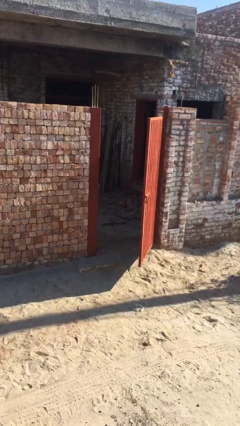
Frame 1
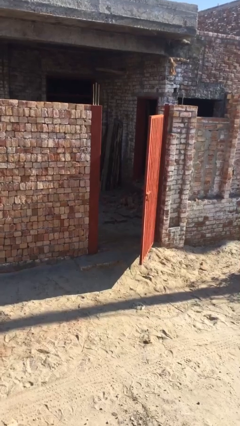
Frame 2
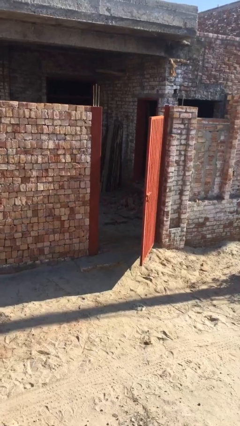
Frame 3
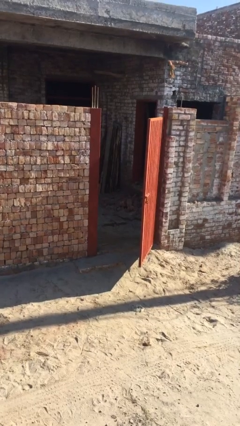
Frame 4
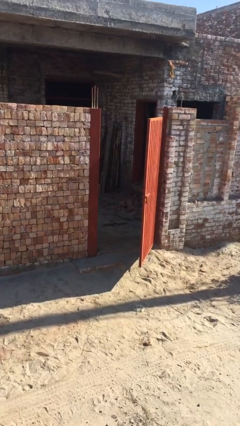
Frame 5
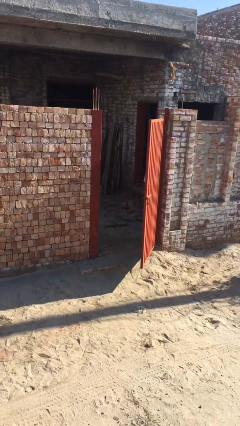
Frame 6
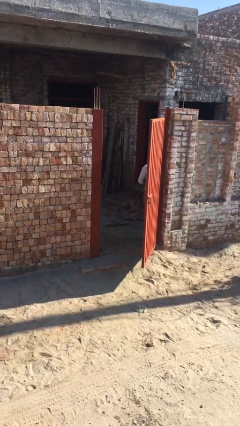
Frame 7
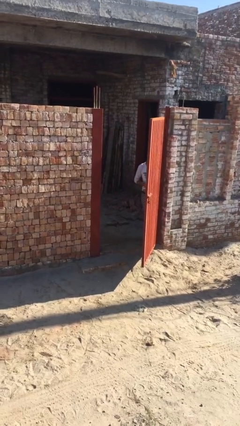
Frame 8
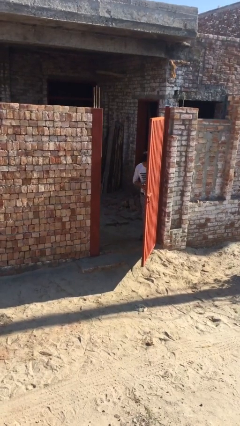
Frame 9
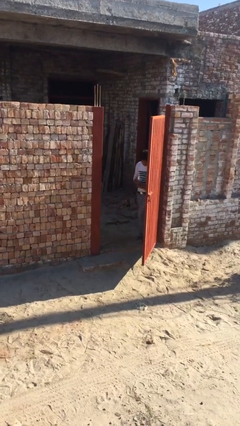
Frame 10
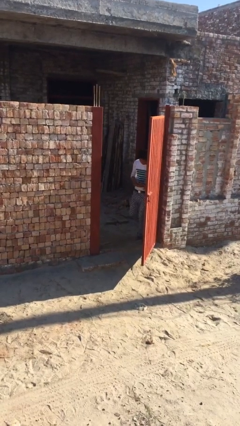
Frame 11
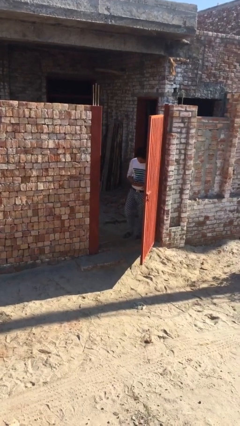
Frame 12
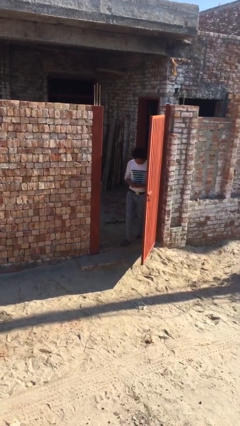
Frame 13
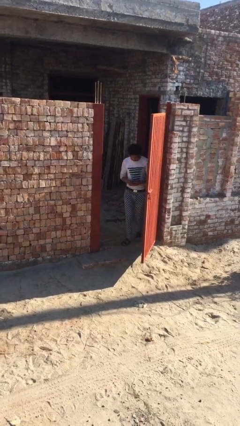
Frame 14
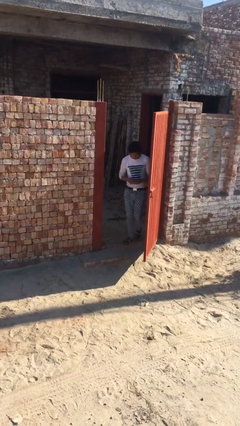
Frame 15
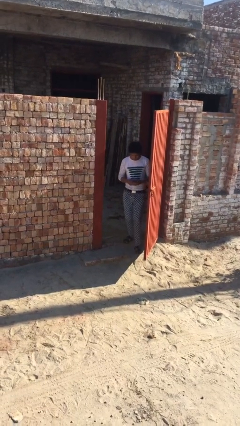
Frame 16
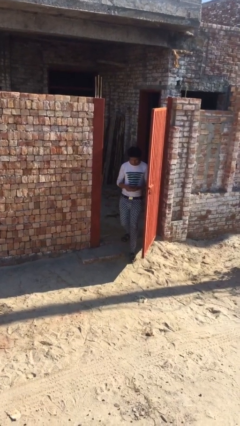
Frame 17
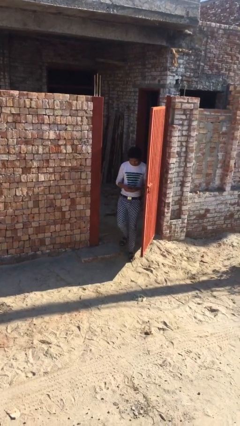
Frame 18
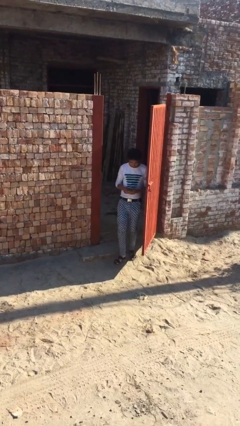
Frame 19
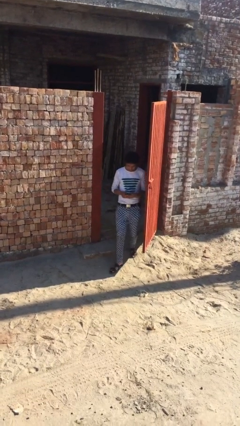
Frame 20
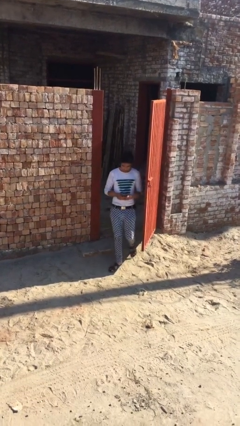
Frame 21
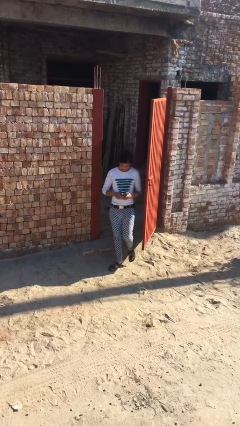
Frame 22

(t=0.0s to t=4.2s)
person enters scene through structure

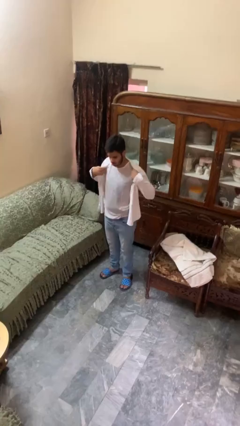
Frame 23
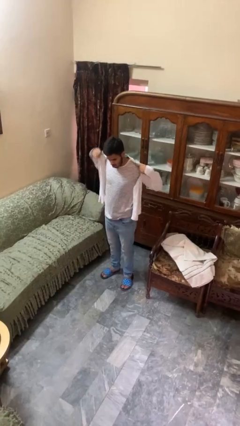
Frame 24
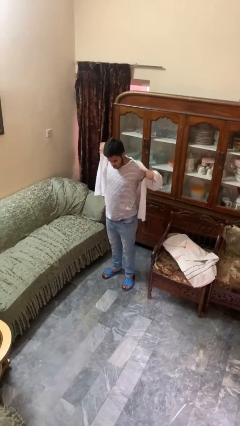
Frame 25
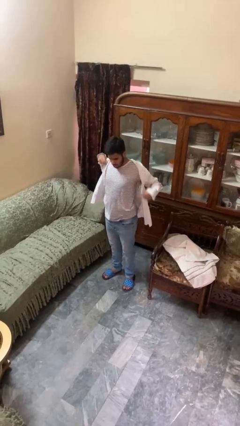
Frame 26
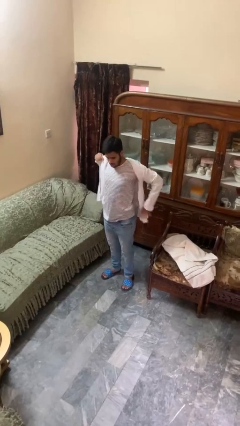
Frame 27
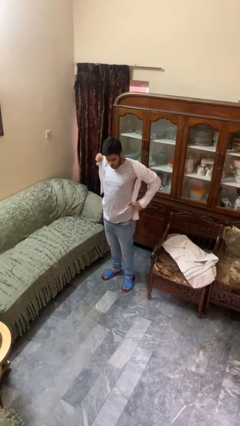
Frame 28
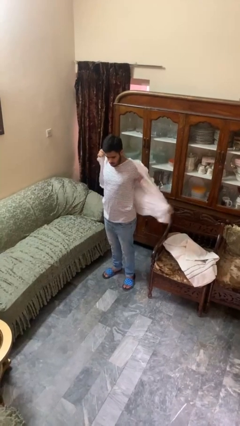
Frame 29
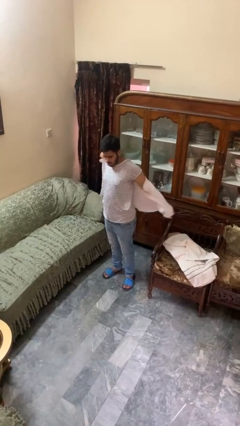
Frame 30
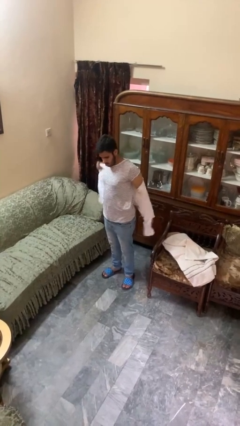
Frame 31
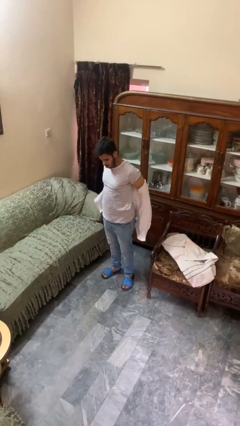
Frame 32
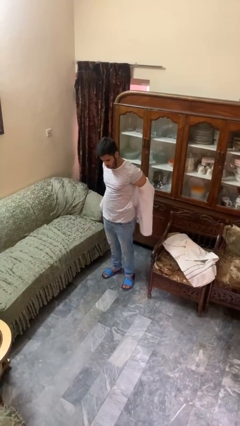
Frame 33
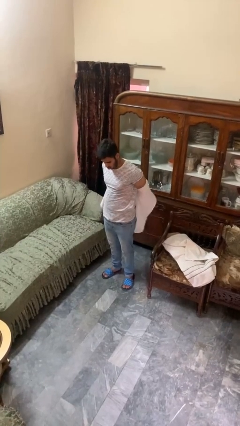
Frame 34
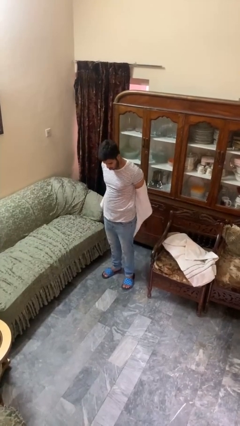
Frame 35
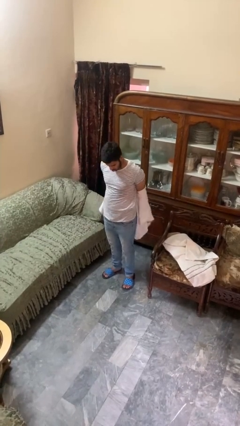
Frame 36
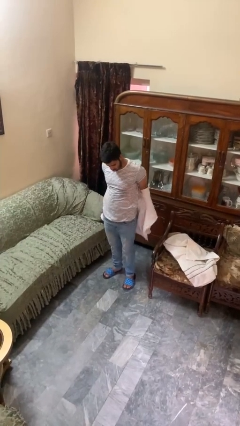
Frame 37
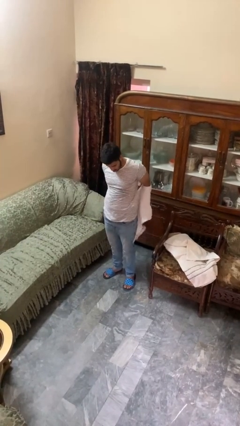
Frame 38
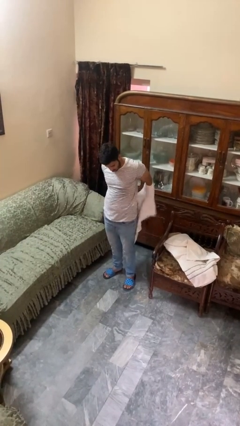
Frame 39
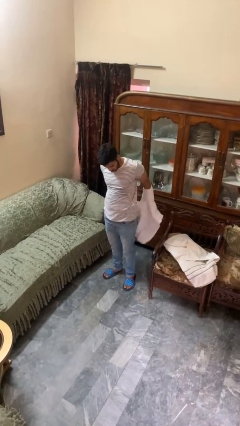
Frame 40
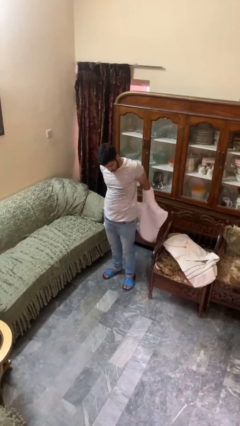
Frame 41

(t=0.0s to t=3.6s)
person takes off shirt

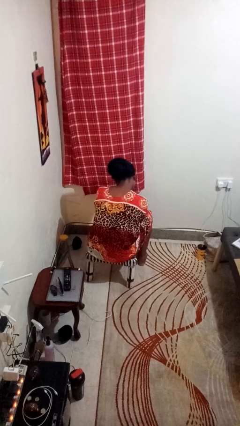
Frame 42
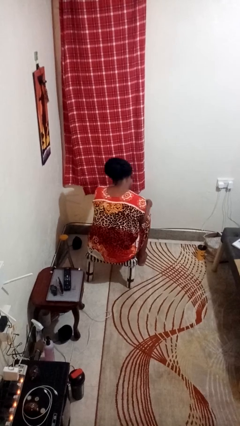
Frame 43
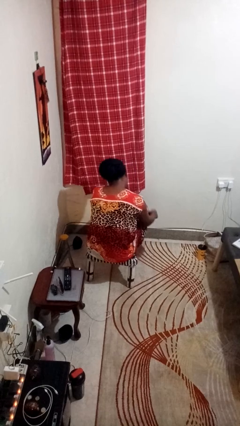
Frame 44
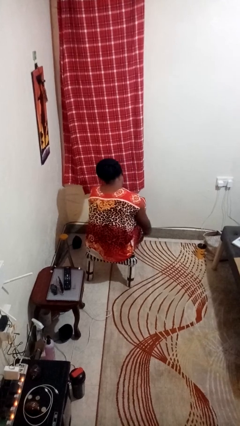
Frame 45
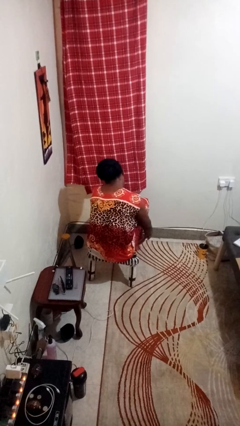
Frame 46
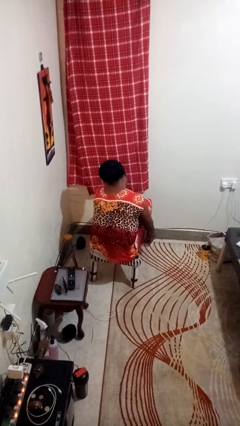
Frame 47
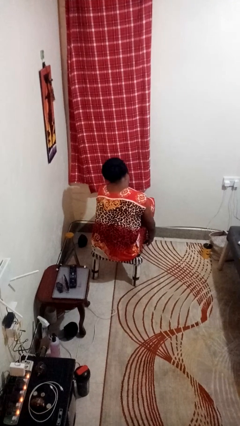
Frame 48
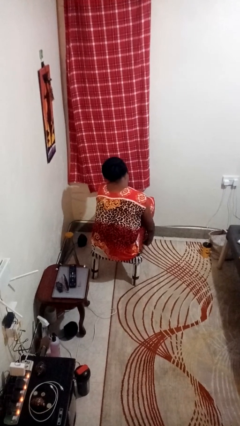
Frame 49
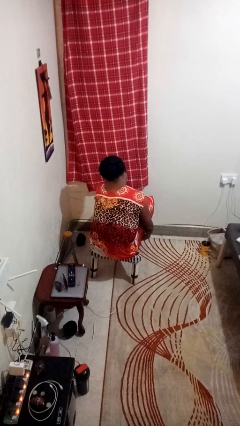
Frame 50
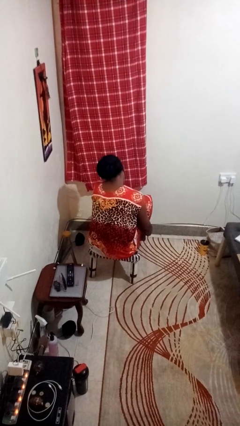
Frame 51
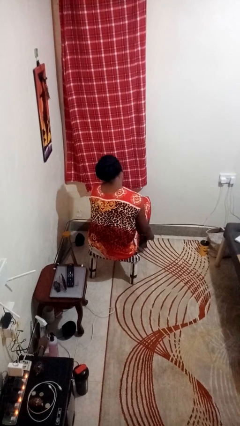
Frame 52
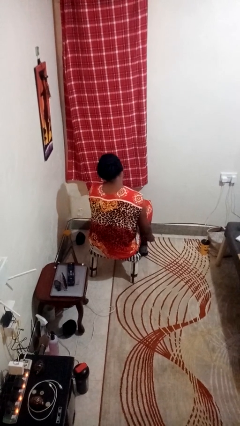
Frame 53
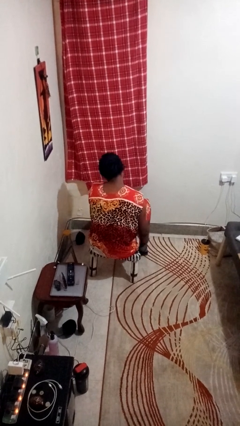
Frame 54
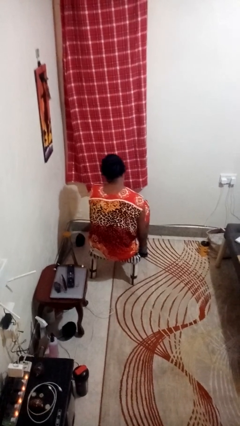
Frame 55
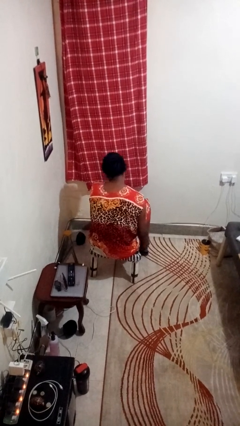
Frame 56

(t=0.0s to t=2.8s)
person puts on socks

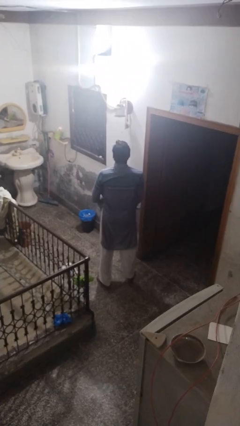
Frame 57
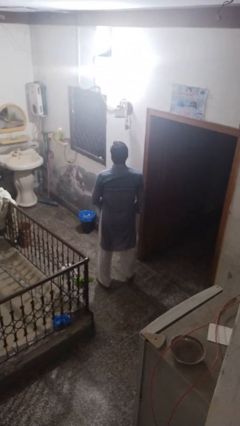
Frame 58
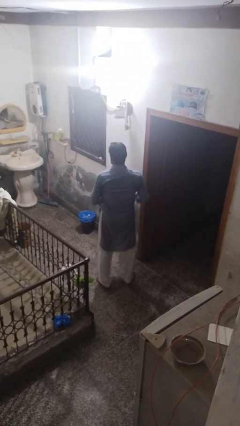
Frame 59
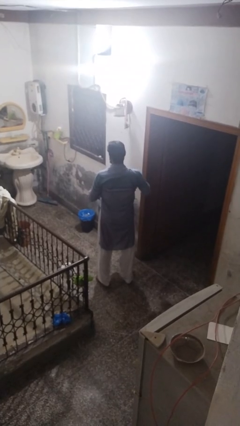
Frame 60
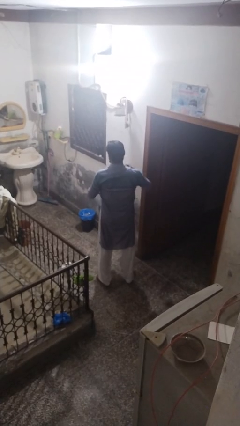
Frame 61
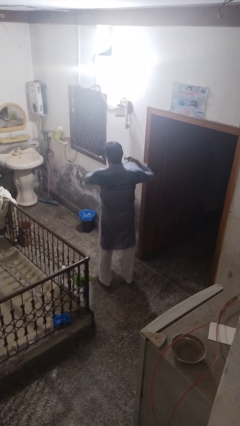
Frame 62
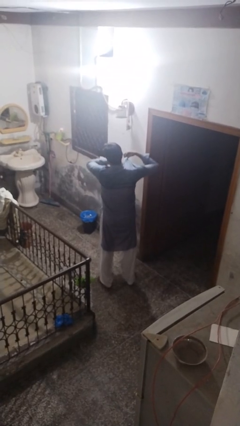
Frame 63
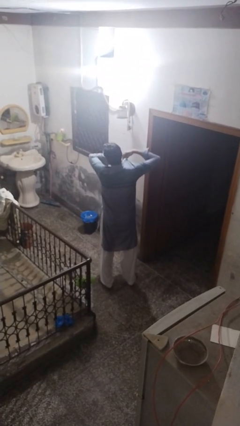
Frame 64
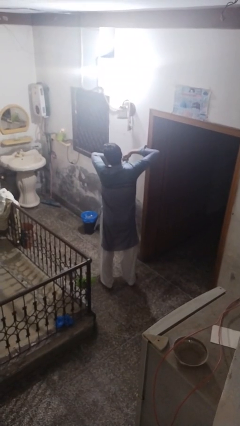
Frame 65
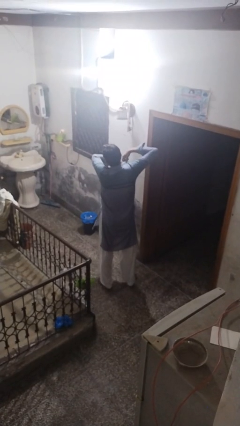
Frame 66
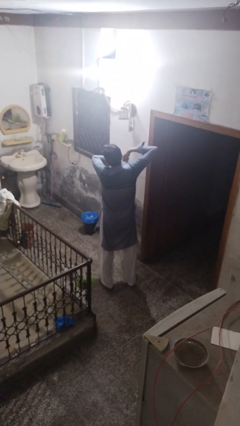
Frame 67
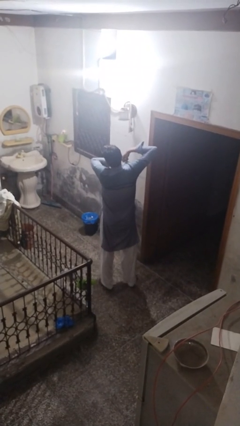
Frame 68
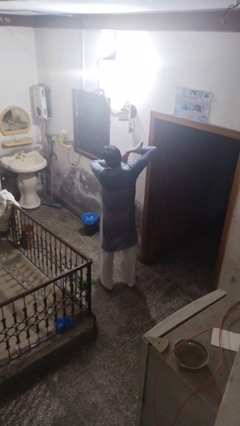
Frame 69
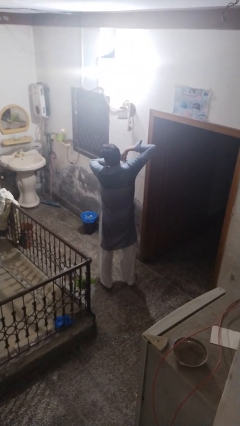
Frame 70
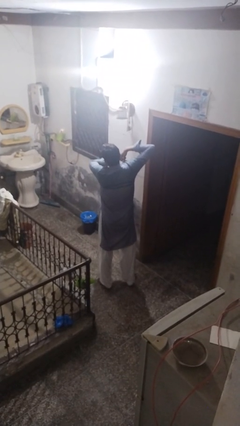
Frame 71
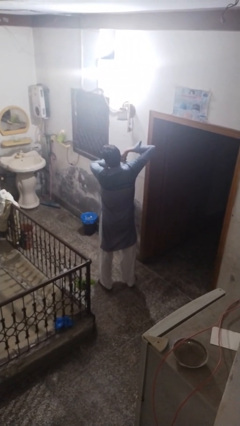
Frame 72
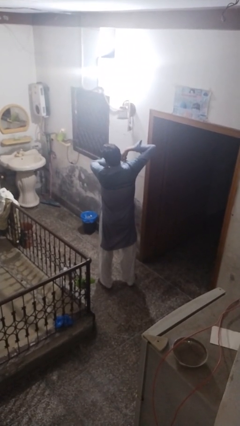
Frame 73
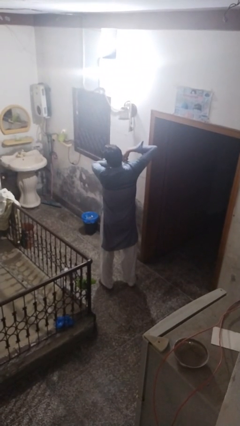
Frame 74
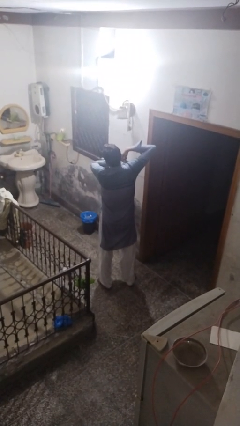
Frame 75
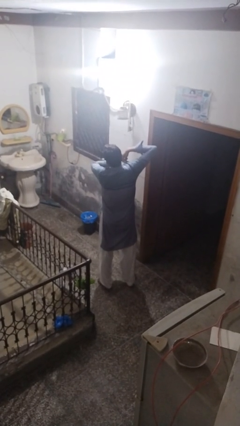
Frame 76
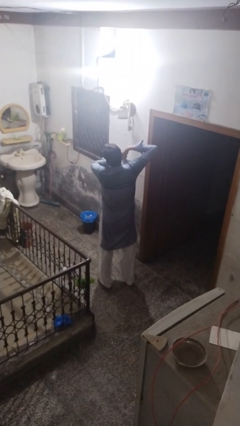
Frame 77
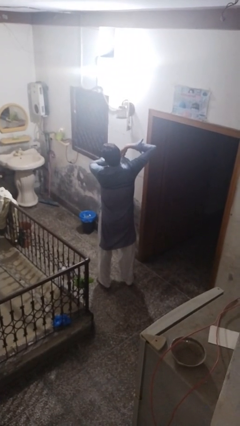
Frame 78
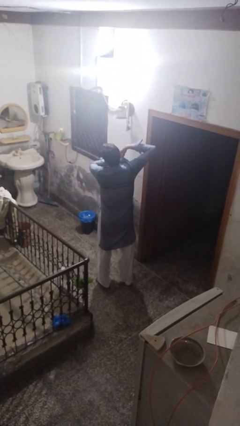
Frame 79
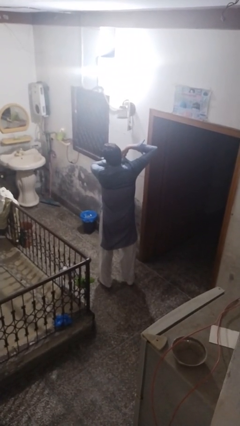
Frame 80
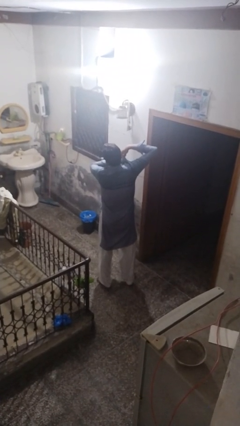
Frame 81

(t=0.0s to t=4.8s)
person applies deodorant

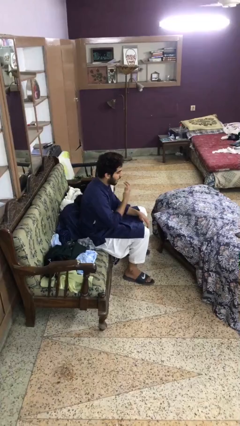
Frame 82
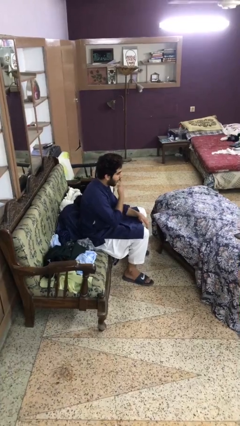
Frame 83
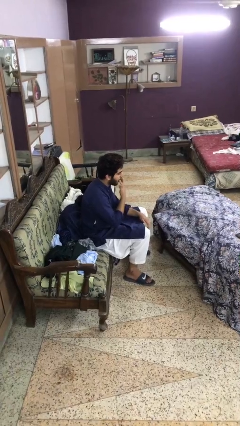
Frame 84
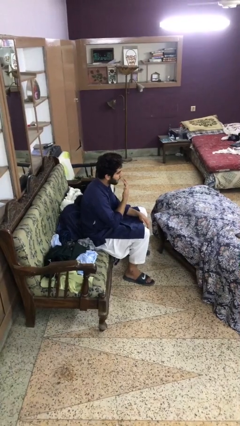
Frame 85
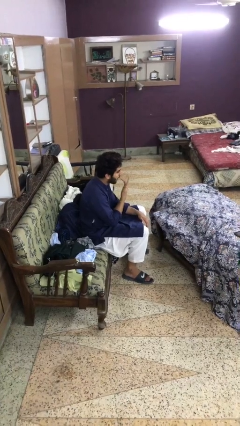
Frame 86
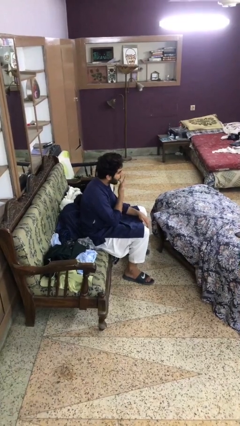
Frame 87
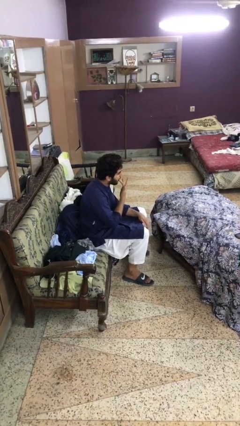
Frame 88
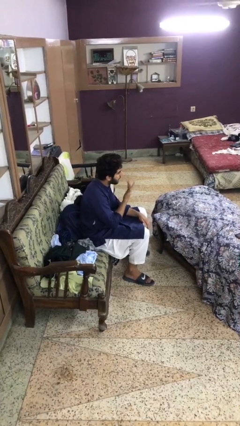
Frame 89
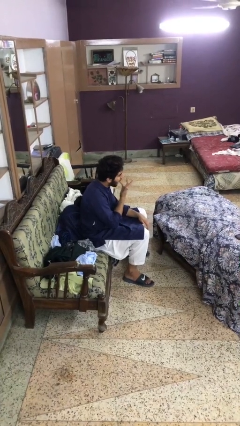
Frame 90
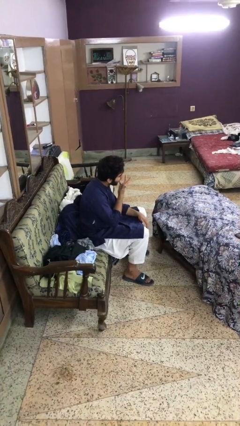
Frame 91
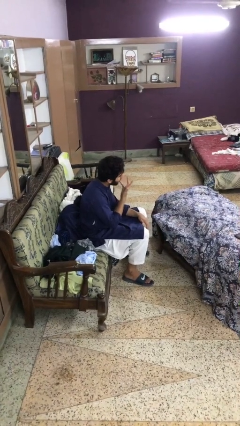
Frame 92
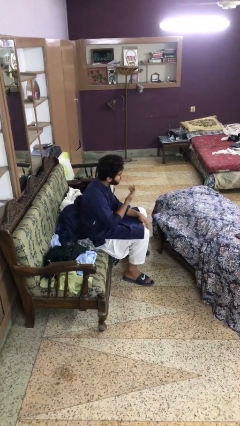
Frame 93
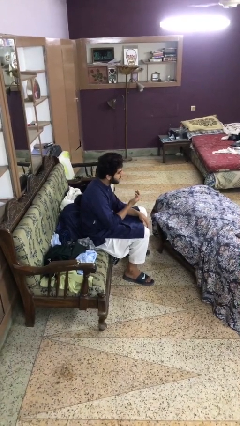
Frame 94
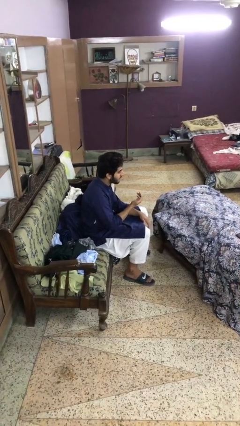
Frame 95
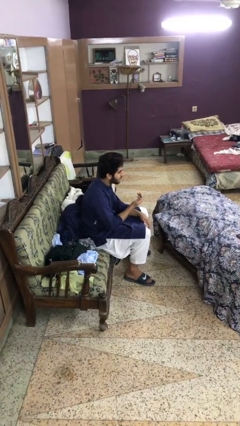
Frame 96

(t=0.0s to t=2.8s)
person licks fingers
